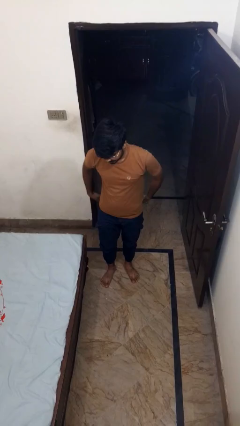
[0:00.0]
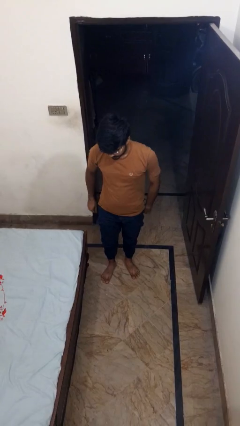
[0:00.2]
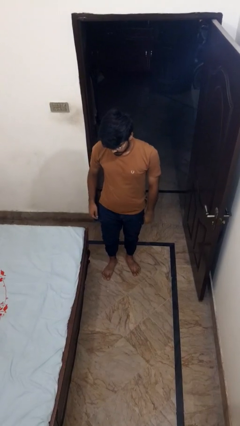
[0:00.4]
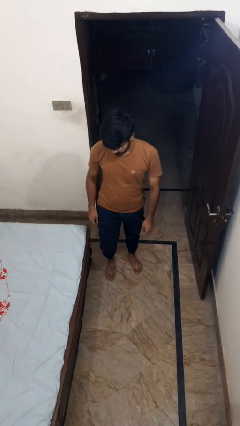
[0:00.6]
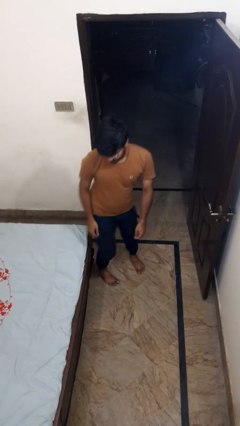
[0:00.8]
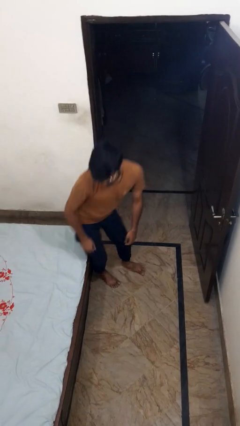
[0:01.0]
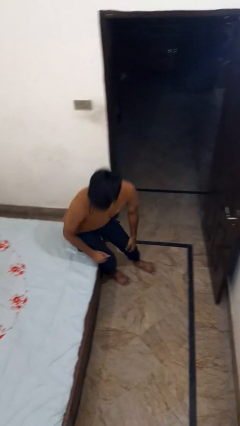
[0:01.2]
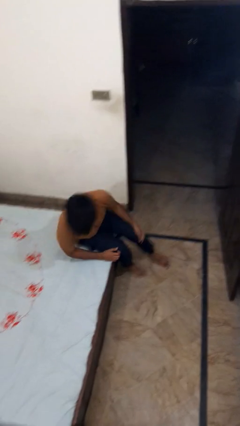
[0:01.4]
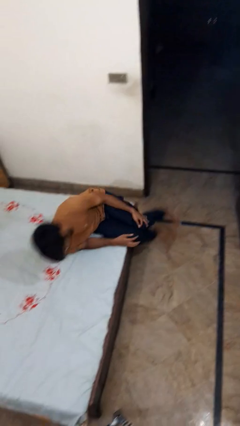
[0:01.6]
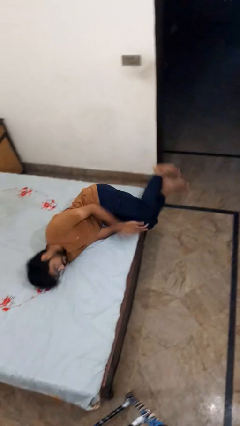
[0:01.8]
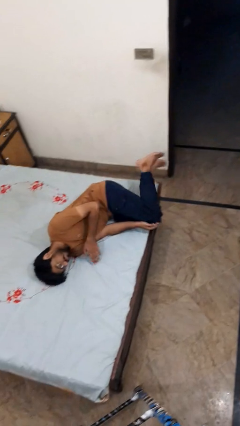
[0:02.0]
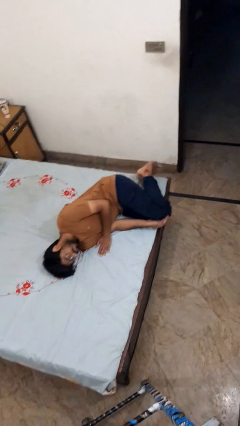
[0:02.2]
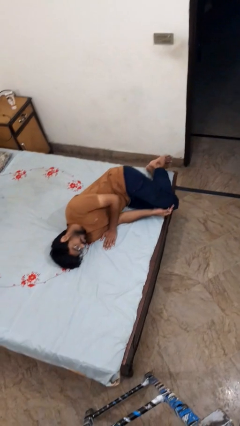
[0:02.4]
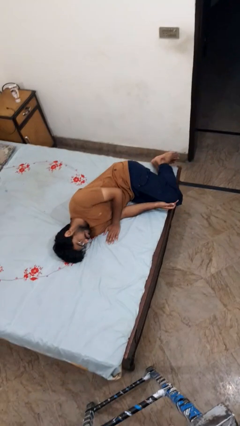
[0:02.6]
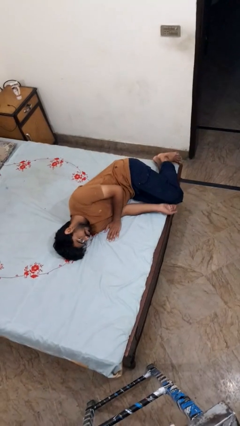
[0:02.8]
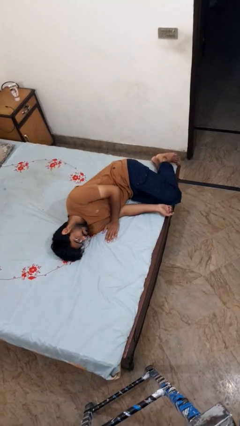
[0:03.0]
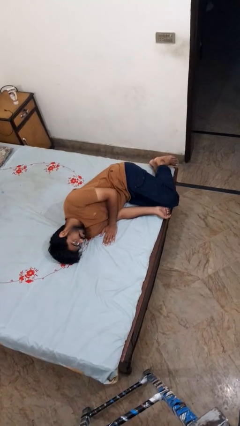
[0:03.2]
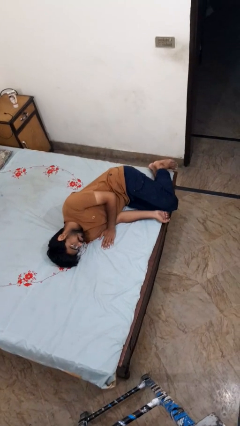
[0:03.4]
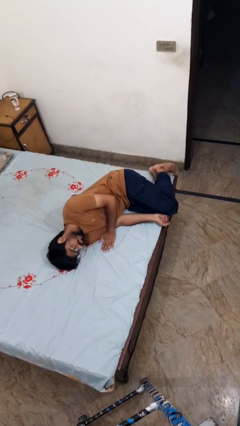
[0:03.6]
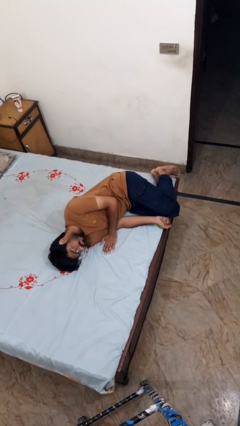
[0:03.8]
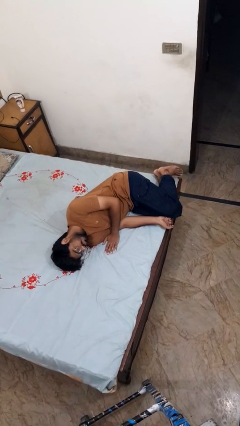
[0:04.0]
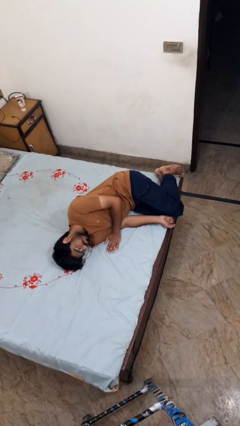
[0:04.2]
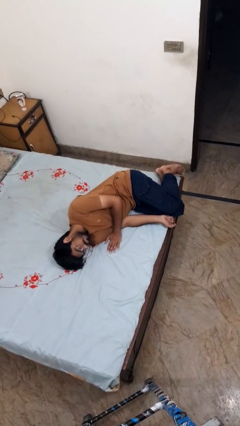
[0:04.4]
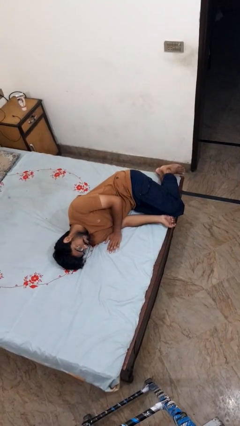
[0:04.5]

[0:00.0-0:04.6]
person lies down on bed

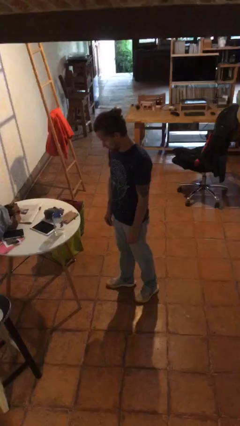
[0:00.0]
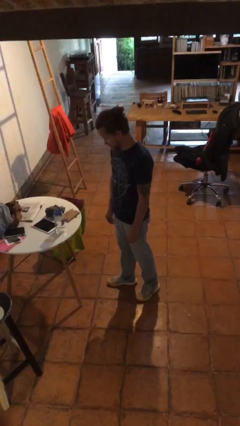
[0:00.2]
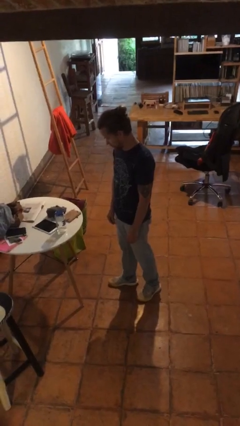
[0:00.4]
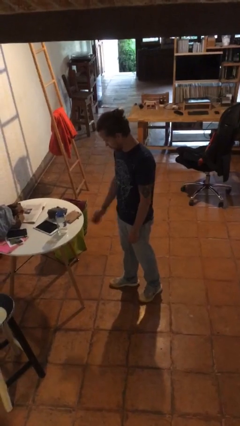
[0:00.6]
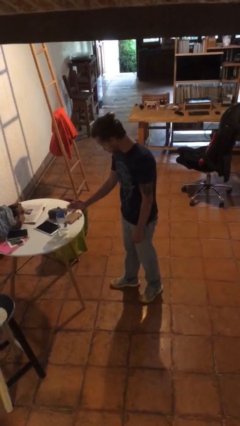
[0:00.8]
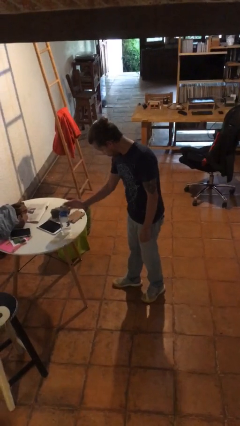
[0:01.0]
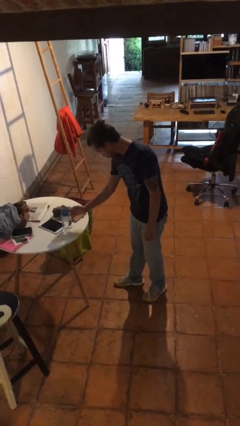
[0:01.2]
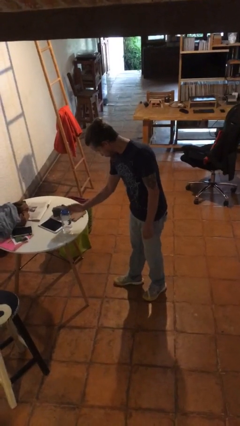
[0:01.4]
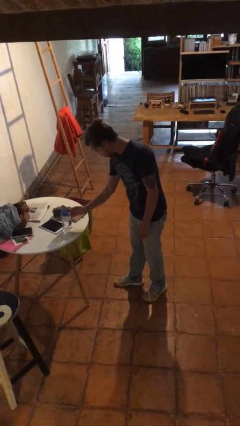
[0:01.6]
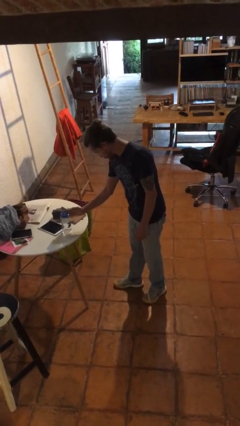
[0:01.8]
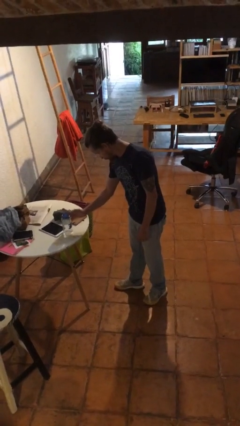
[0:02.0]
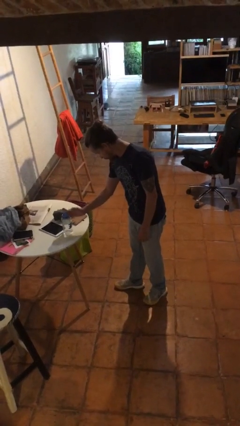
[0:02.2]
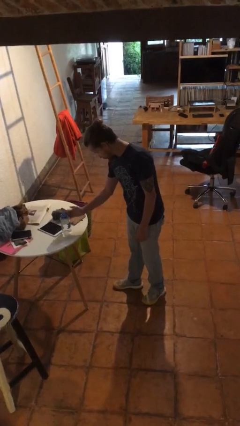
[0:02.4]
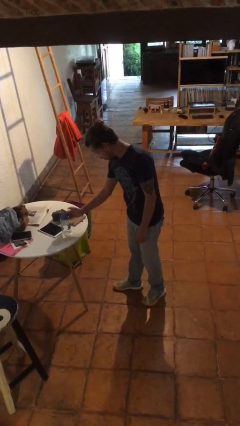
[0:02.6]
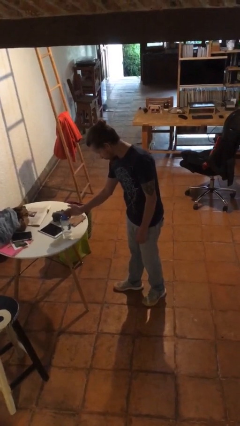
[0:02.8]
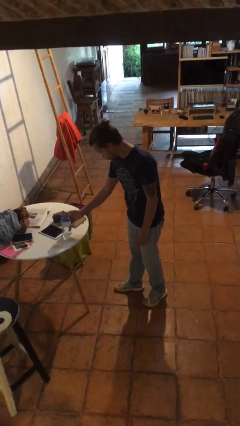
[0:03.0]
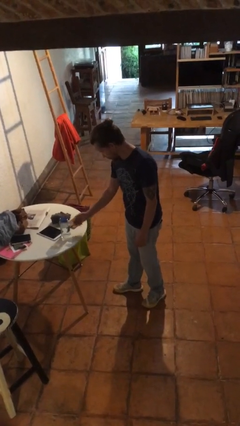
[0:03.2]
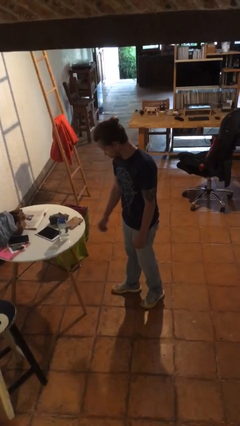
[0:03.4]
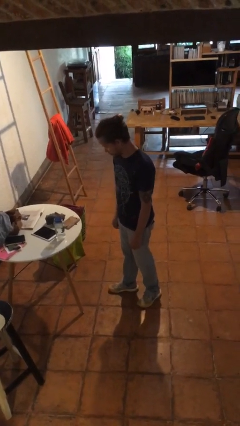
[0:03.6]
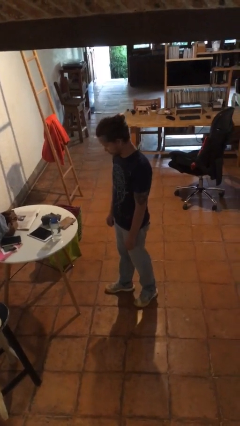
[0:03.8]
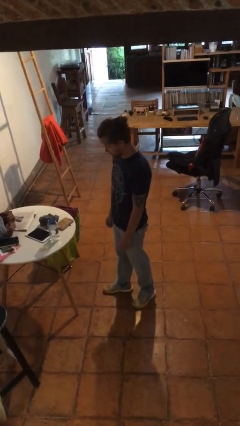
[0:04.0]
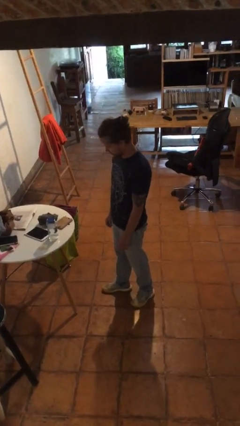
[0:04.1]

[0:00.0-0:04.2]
person waves hand over object

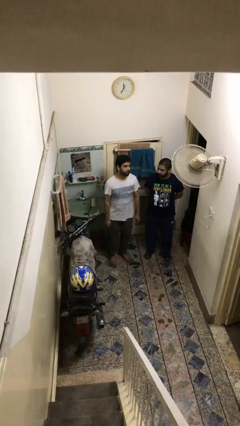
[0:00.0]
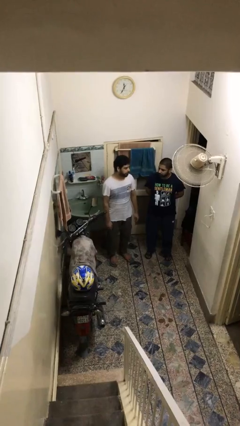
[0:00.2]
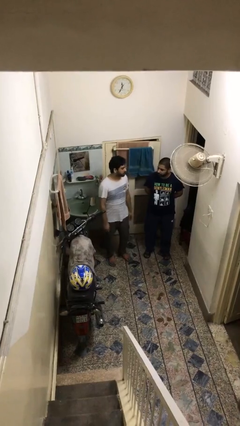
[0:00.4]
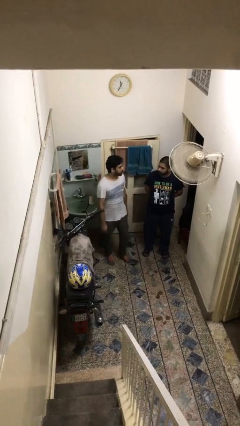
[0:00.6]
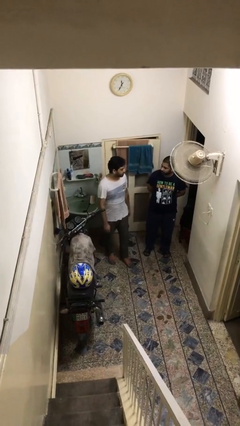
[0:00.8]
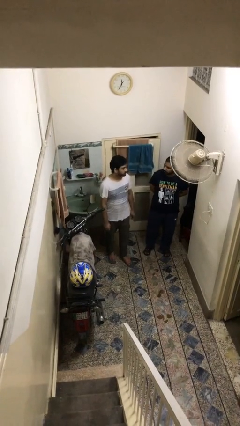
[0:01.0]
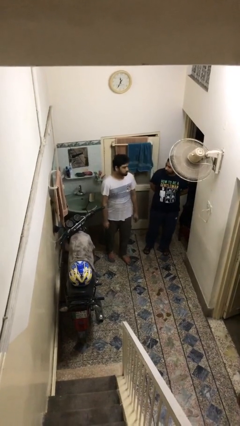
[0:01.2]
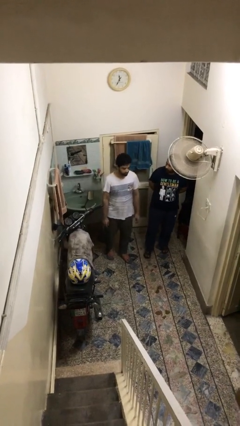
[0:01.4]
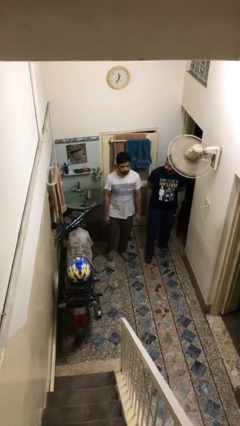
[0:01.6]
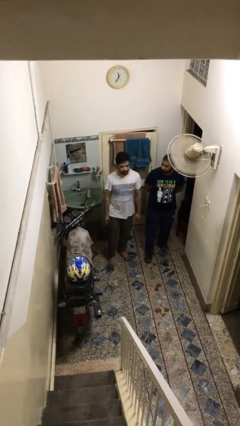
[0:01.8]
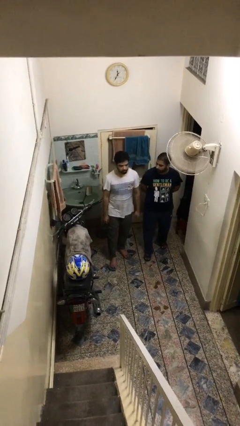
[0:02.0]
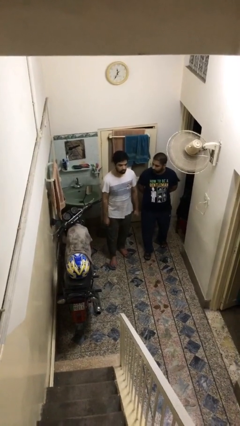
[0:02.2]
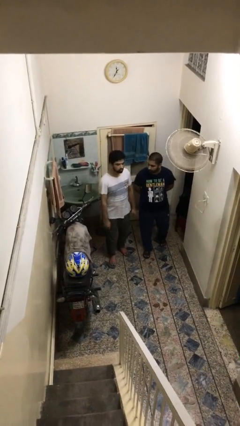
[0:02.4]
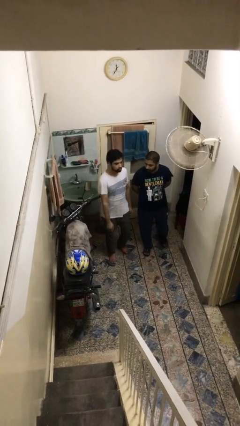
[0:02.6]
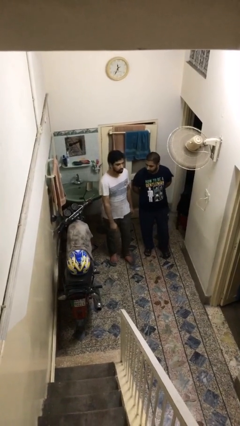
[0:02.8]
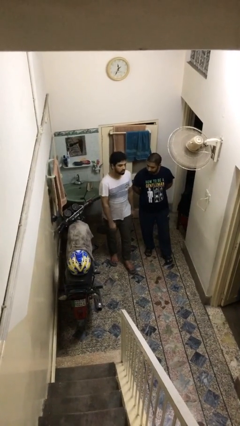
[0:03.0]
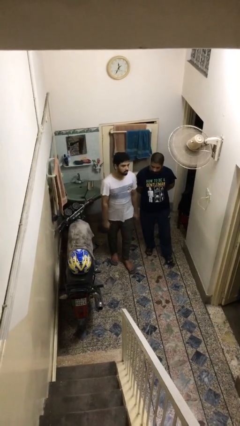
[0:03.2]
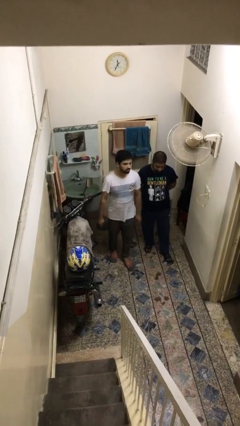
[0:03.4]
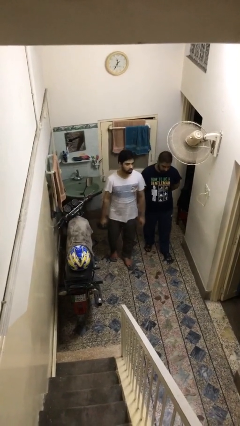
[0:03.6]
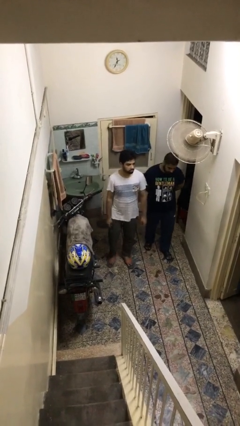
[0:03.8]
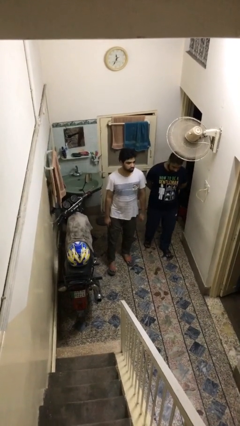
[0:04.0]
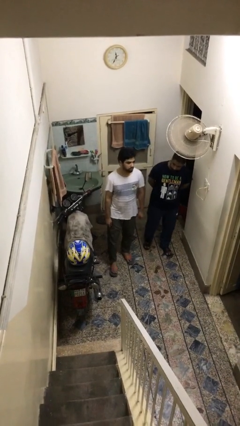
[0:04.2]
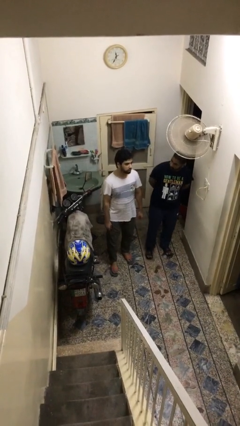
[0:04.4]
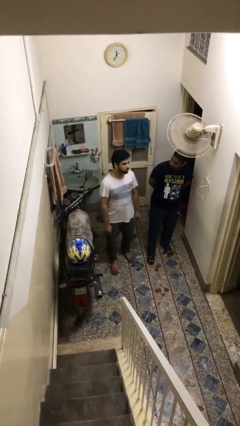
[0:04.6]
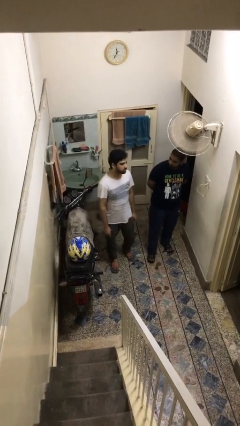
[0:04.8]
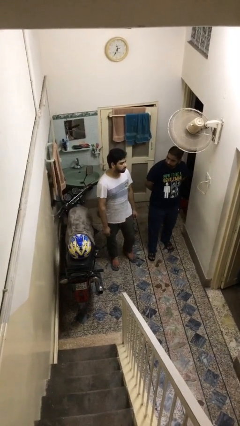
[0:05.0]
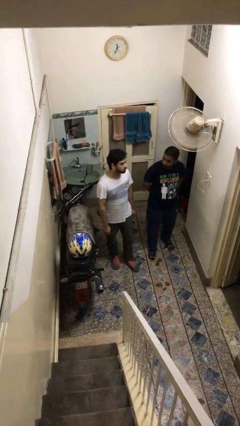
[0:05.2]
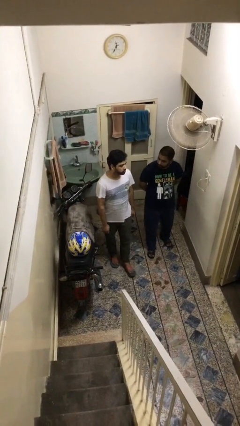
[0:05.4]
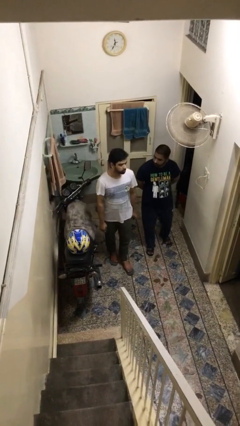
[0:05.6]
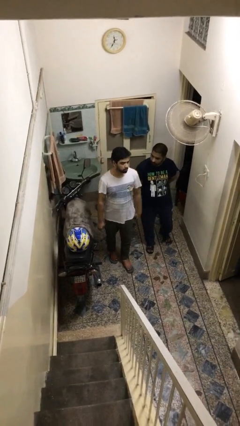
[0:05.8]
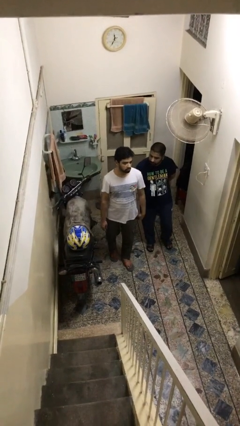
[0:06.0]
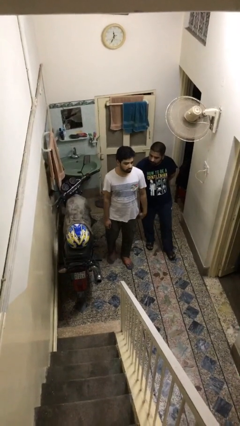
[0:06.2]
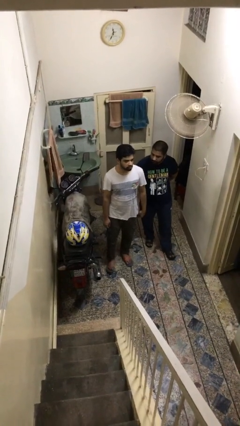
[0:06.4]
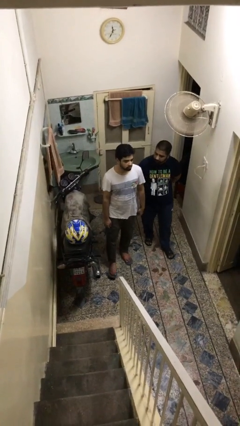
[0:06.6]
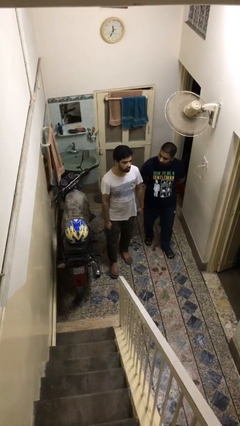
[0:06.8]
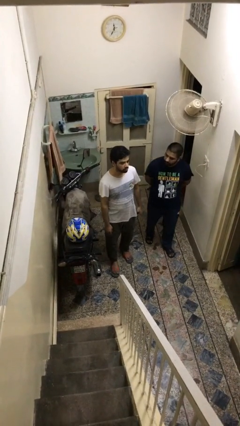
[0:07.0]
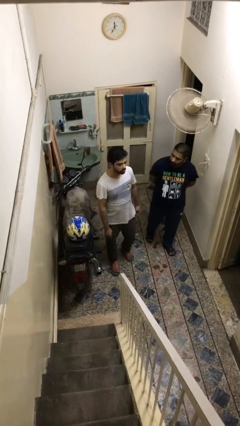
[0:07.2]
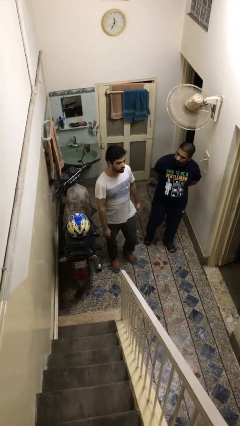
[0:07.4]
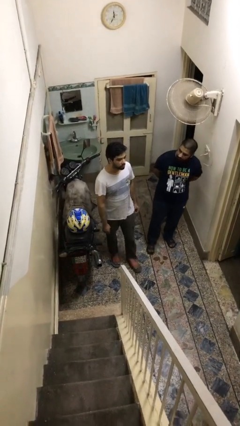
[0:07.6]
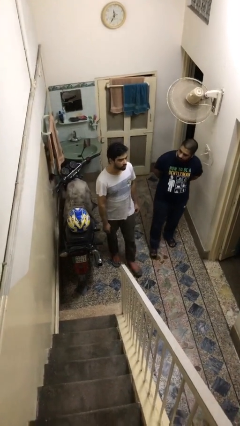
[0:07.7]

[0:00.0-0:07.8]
person talks to person

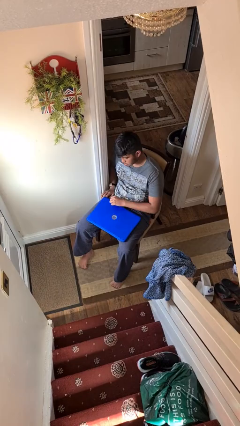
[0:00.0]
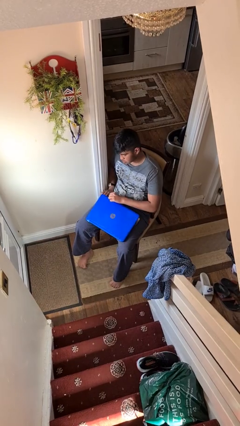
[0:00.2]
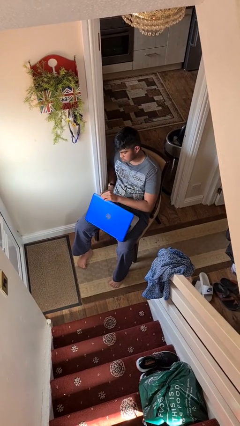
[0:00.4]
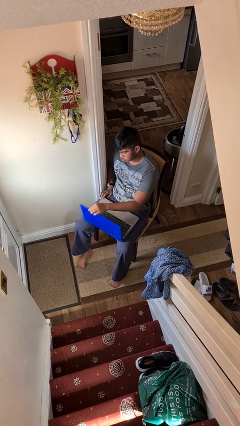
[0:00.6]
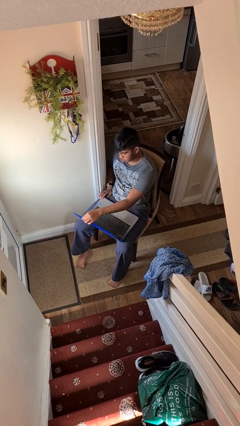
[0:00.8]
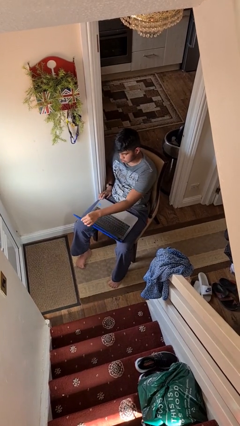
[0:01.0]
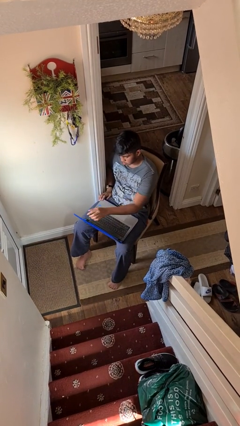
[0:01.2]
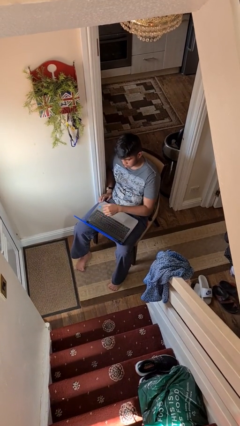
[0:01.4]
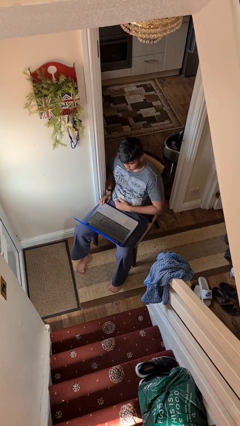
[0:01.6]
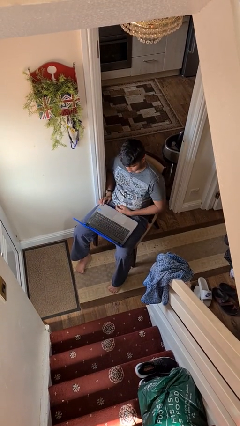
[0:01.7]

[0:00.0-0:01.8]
person opens laptop
